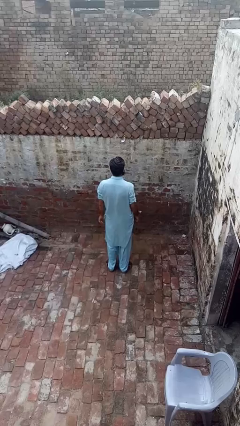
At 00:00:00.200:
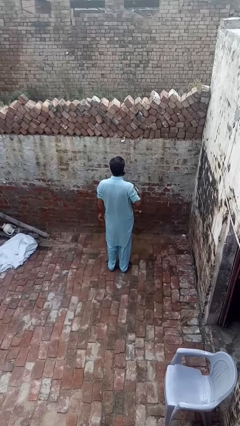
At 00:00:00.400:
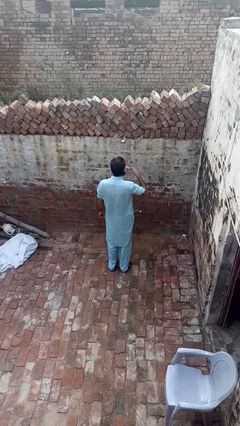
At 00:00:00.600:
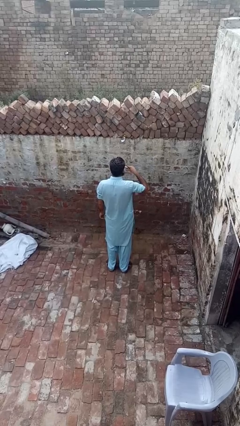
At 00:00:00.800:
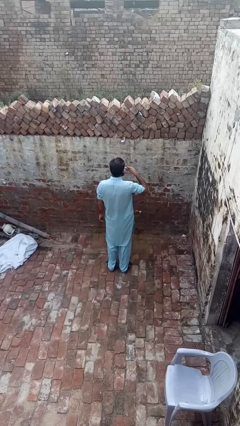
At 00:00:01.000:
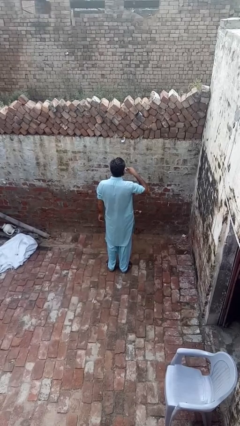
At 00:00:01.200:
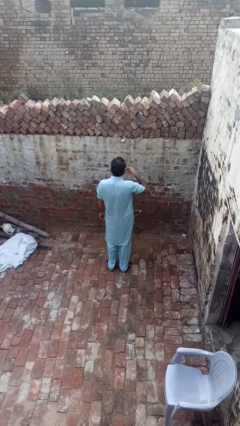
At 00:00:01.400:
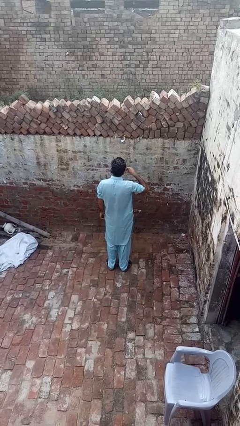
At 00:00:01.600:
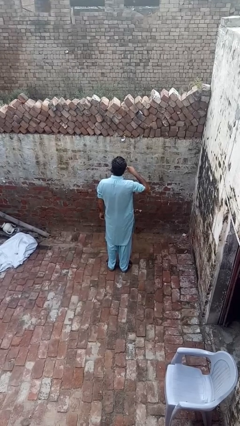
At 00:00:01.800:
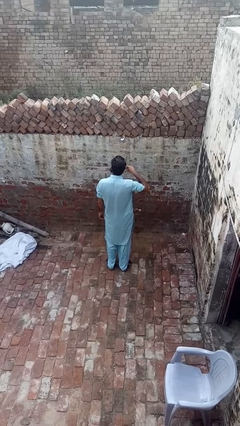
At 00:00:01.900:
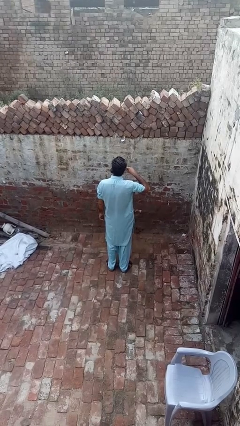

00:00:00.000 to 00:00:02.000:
person brushes teeth

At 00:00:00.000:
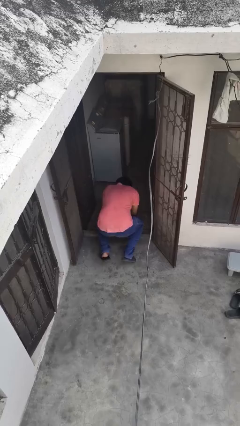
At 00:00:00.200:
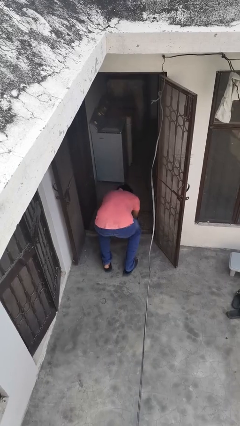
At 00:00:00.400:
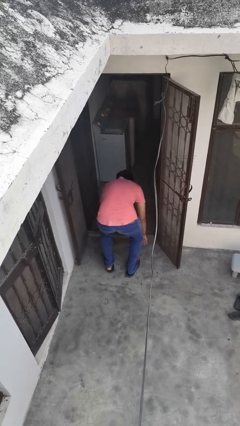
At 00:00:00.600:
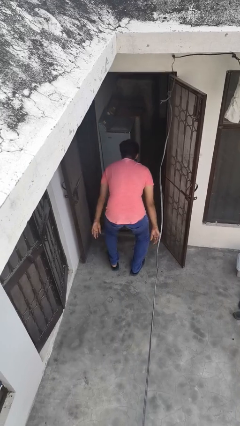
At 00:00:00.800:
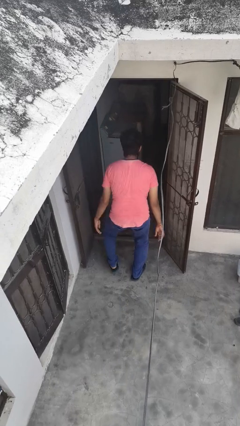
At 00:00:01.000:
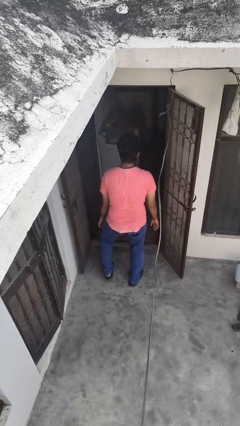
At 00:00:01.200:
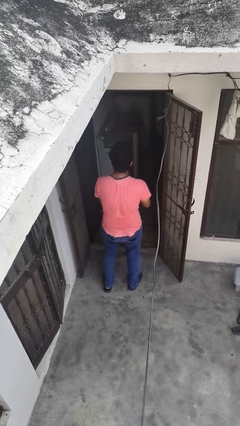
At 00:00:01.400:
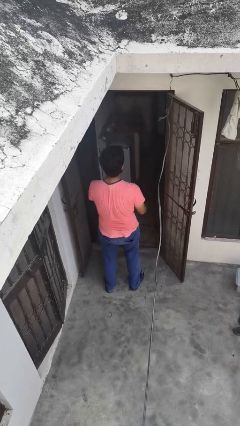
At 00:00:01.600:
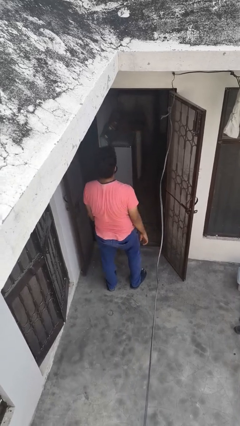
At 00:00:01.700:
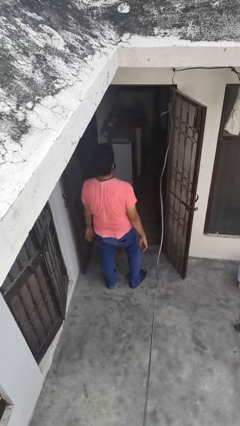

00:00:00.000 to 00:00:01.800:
person stands up from floor

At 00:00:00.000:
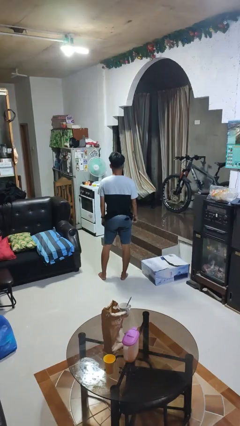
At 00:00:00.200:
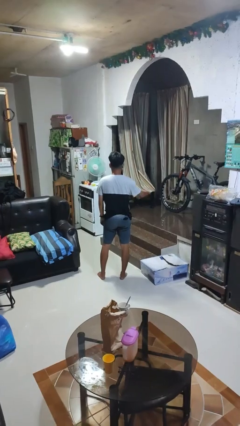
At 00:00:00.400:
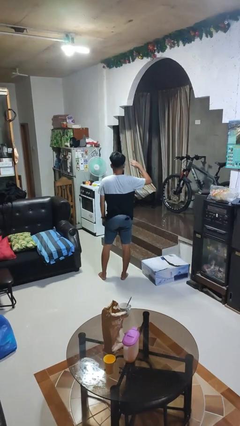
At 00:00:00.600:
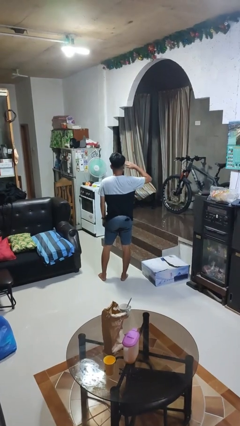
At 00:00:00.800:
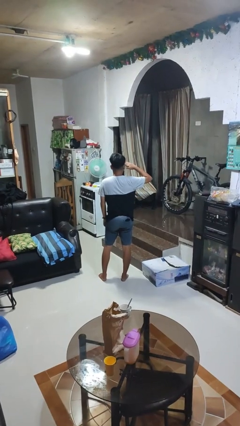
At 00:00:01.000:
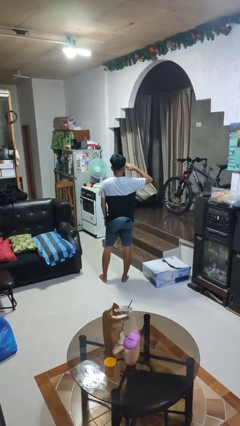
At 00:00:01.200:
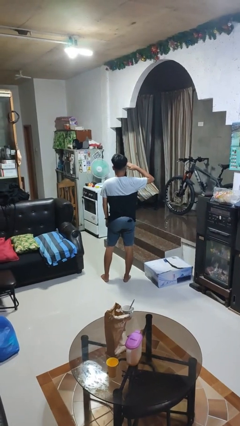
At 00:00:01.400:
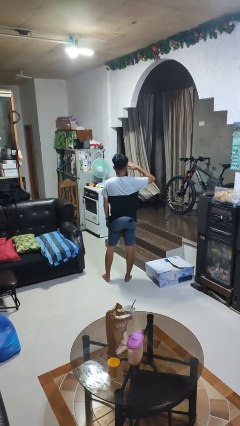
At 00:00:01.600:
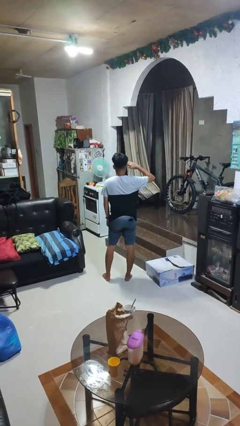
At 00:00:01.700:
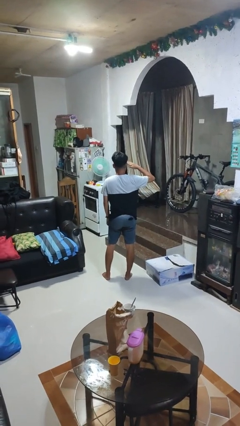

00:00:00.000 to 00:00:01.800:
person salutes

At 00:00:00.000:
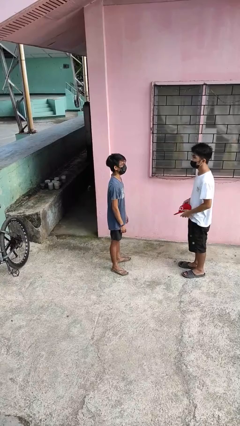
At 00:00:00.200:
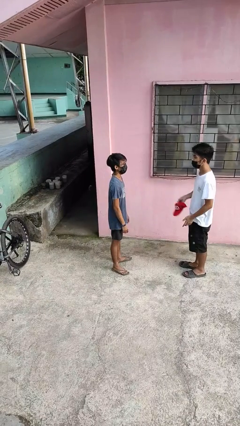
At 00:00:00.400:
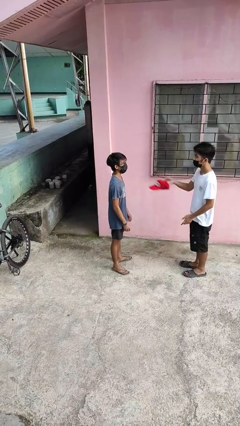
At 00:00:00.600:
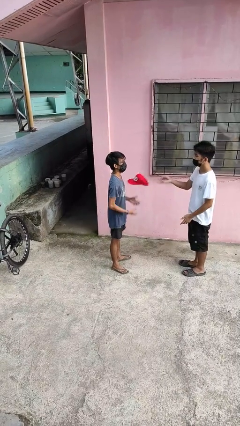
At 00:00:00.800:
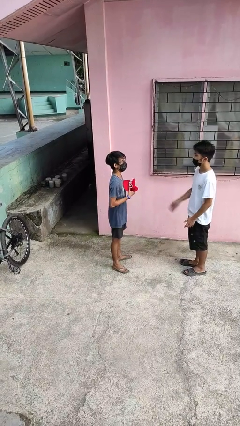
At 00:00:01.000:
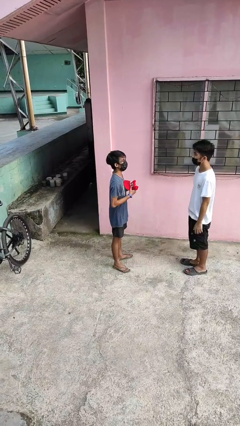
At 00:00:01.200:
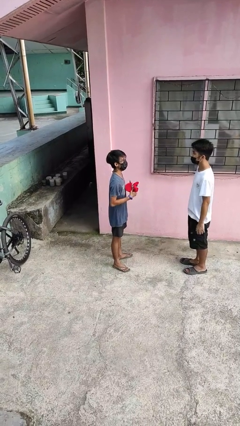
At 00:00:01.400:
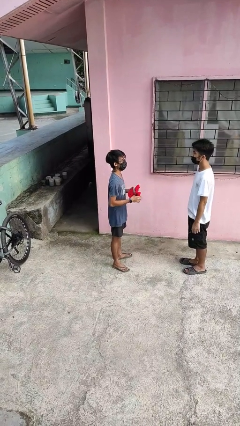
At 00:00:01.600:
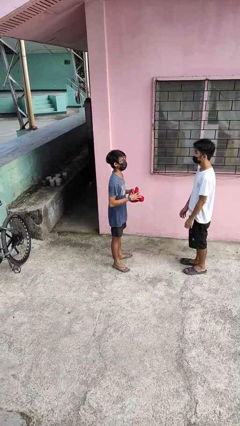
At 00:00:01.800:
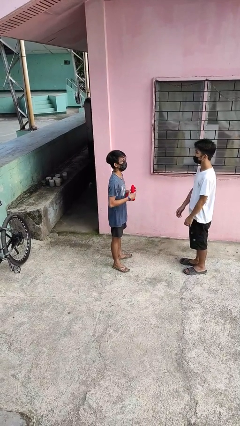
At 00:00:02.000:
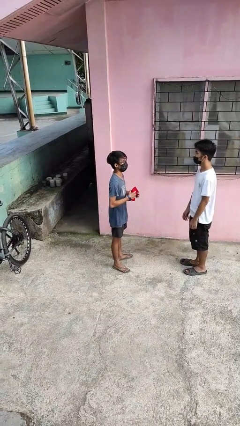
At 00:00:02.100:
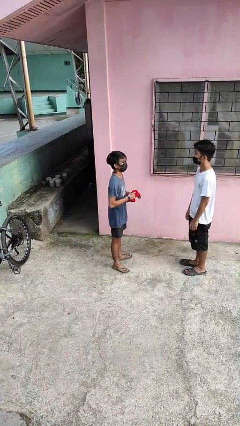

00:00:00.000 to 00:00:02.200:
person catches object from person

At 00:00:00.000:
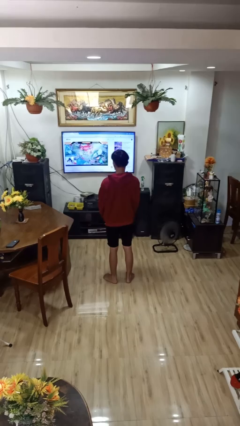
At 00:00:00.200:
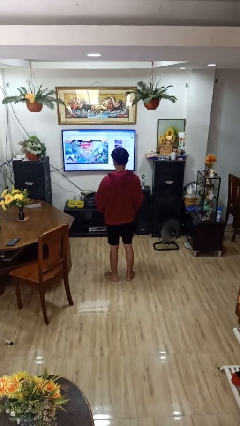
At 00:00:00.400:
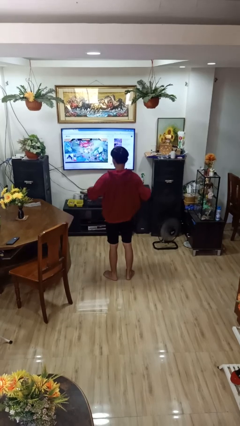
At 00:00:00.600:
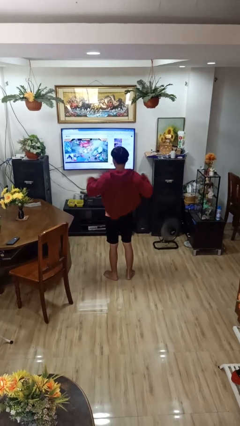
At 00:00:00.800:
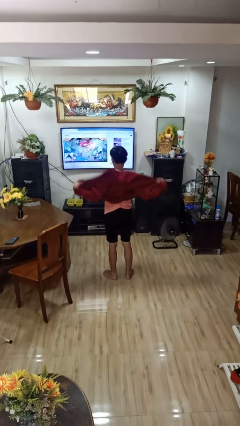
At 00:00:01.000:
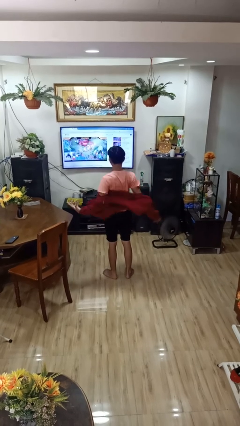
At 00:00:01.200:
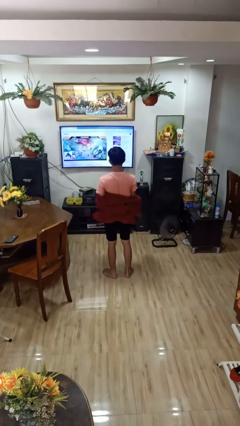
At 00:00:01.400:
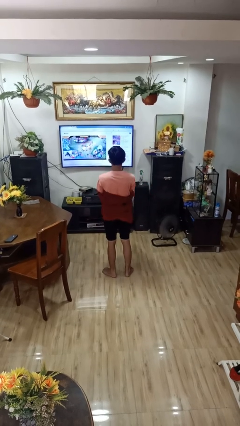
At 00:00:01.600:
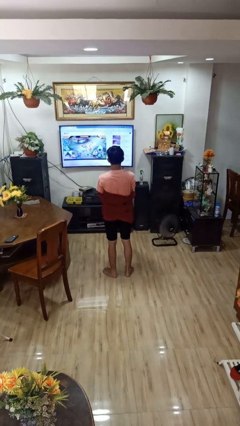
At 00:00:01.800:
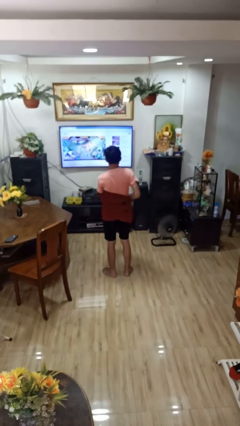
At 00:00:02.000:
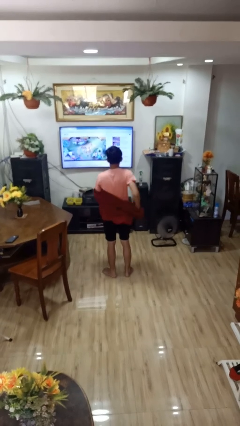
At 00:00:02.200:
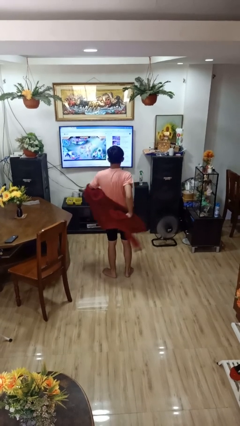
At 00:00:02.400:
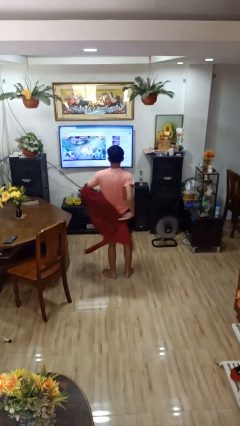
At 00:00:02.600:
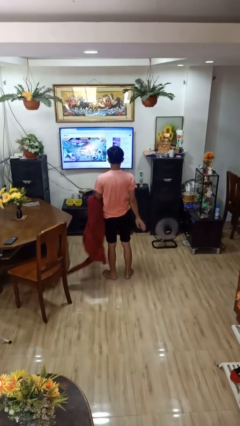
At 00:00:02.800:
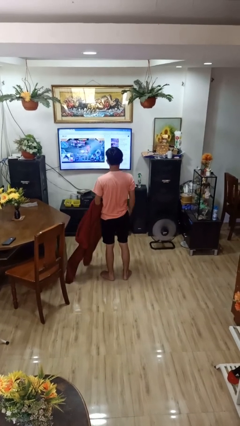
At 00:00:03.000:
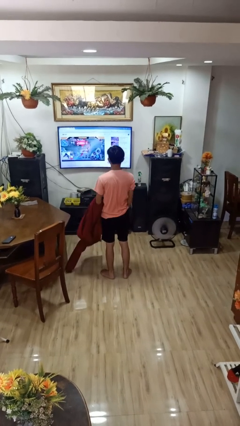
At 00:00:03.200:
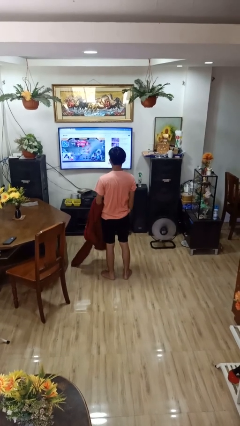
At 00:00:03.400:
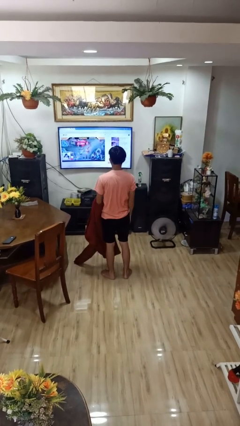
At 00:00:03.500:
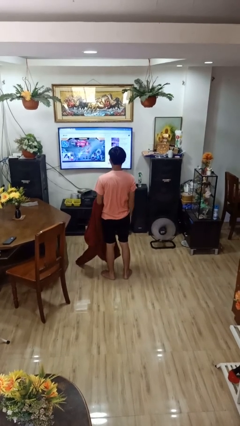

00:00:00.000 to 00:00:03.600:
person takes off jacket

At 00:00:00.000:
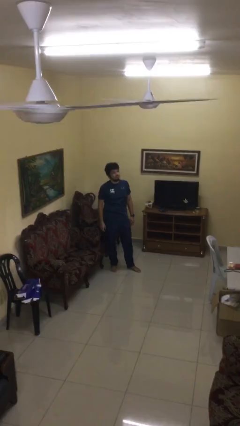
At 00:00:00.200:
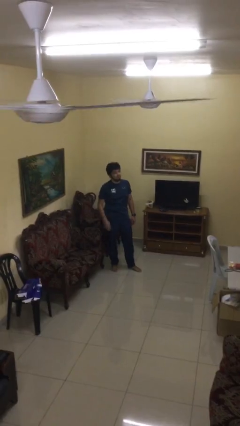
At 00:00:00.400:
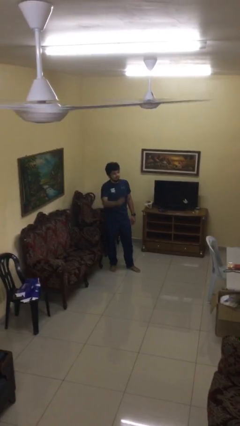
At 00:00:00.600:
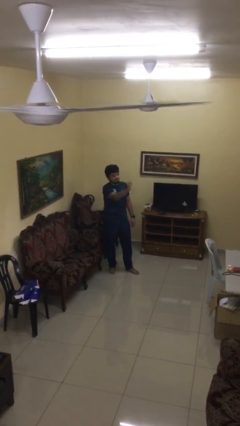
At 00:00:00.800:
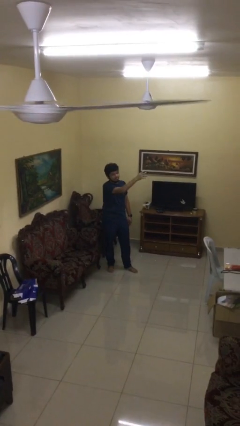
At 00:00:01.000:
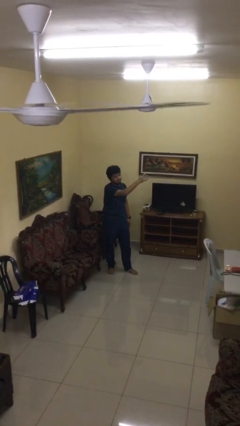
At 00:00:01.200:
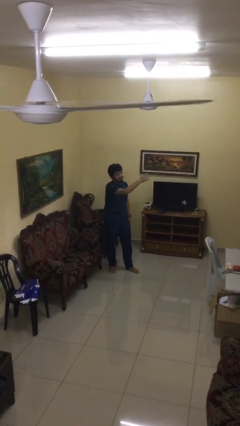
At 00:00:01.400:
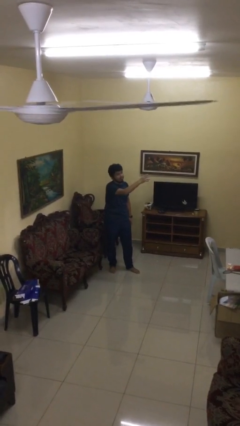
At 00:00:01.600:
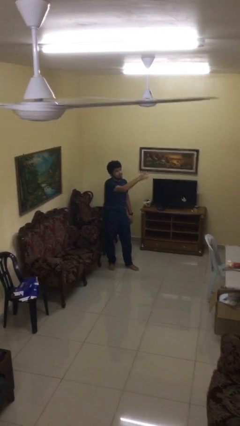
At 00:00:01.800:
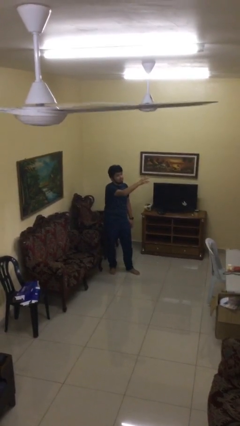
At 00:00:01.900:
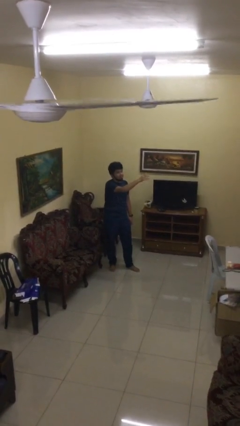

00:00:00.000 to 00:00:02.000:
person gestures swipe left

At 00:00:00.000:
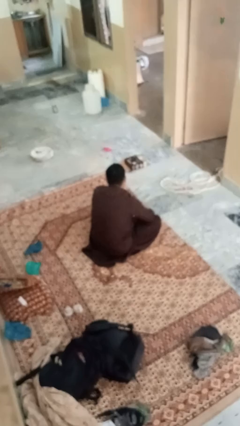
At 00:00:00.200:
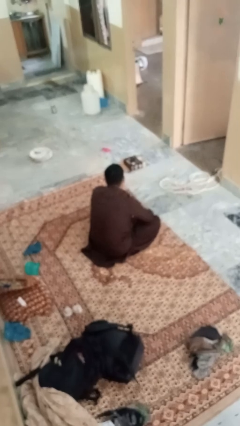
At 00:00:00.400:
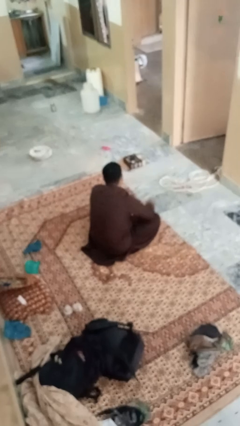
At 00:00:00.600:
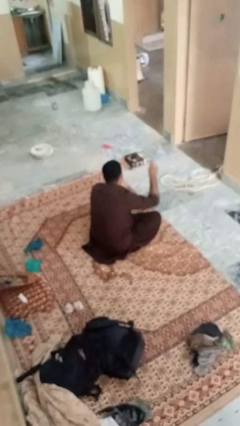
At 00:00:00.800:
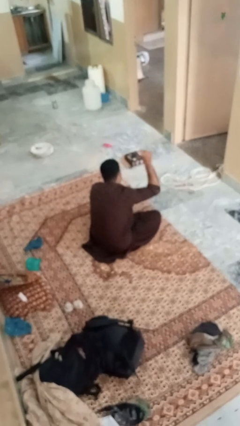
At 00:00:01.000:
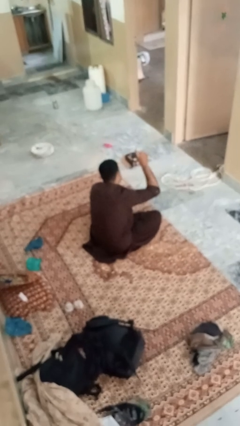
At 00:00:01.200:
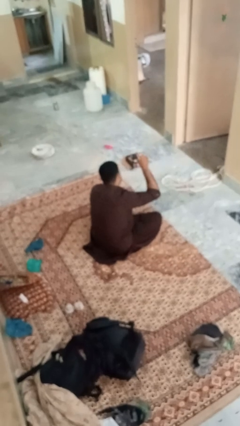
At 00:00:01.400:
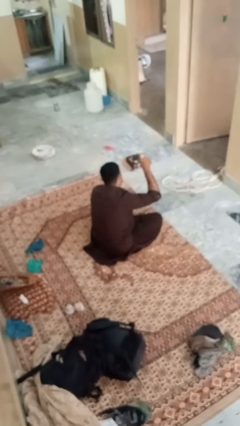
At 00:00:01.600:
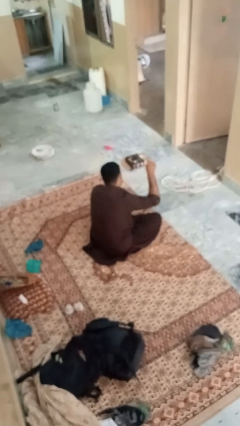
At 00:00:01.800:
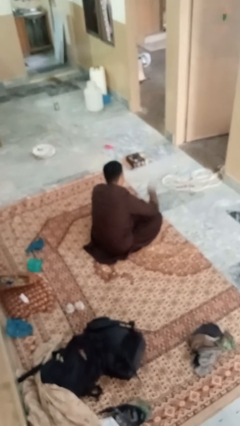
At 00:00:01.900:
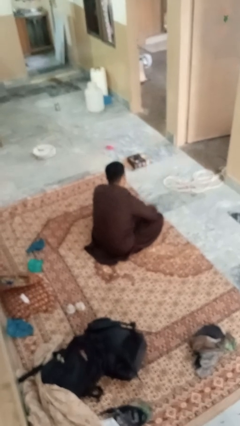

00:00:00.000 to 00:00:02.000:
person gestures number one

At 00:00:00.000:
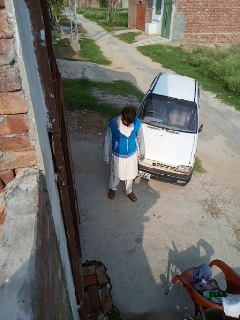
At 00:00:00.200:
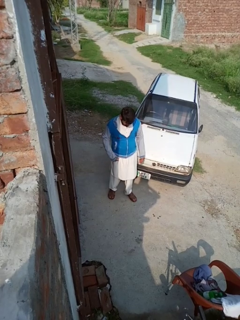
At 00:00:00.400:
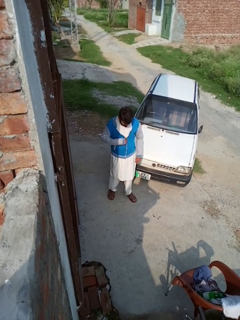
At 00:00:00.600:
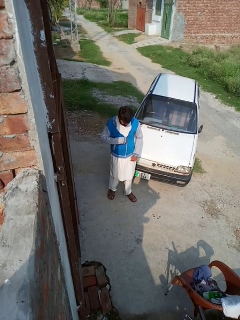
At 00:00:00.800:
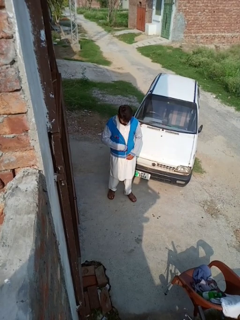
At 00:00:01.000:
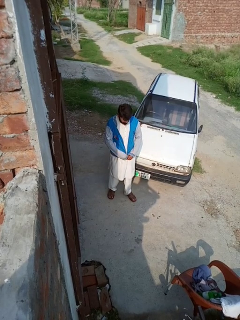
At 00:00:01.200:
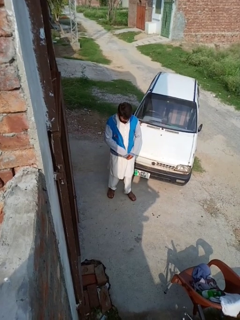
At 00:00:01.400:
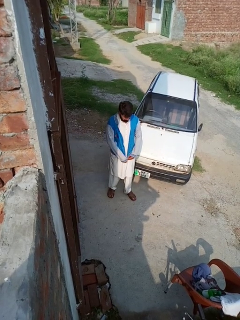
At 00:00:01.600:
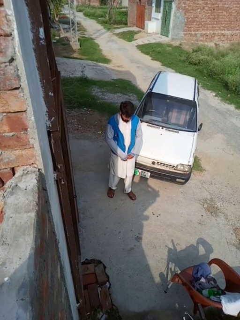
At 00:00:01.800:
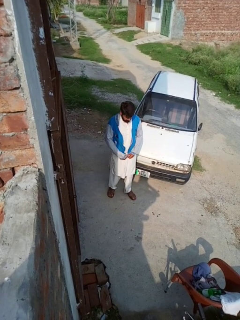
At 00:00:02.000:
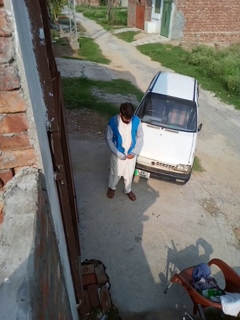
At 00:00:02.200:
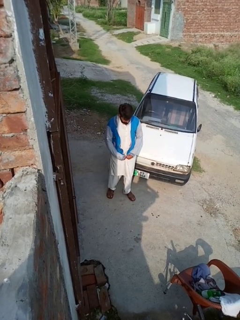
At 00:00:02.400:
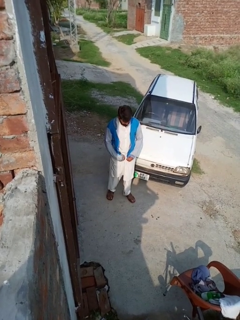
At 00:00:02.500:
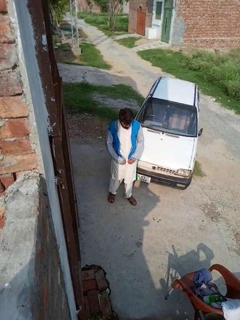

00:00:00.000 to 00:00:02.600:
person unzips jacket
